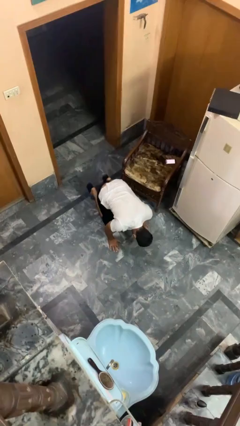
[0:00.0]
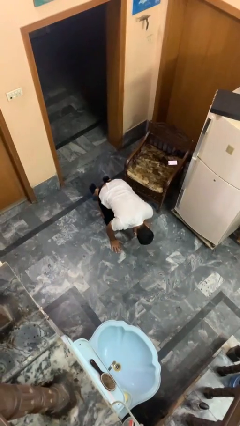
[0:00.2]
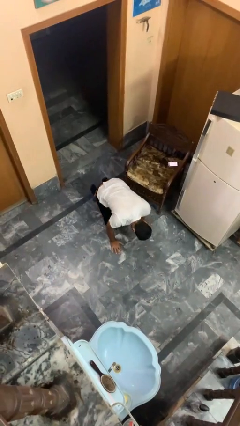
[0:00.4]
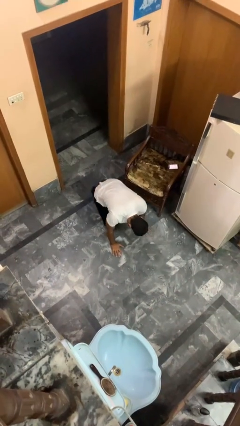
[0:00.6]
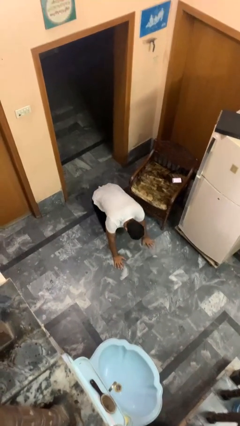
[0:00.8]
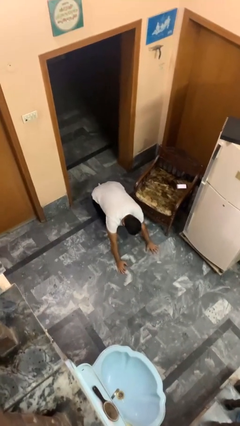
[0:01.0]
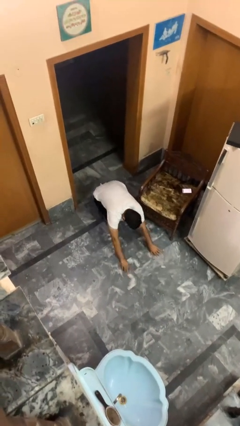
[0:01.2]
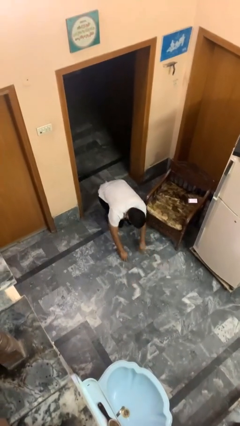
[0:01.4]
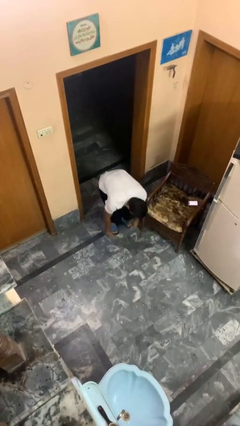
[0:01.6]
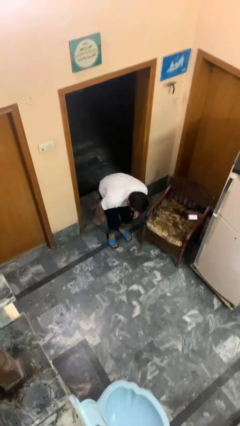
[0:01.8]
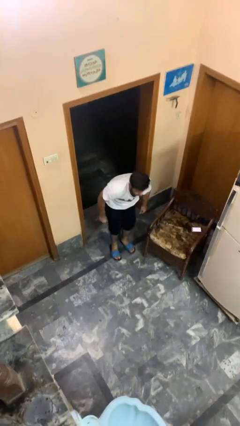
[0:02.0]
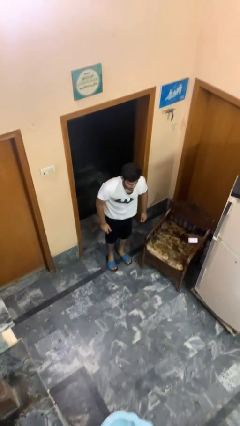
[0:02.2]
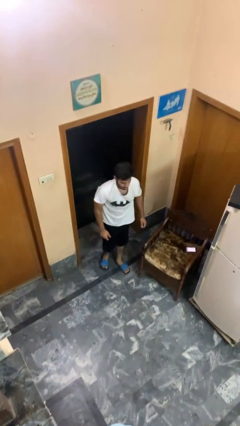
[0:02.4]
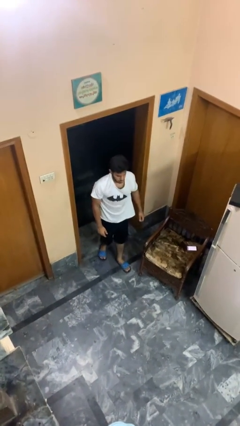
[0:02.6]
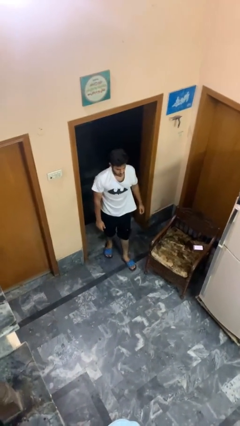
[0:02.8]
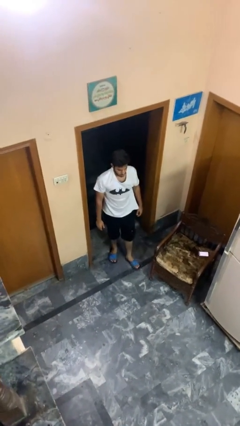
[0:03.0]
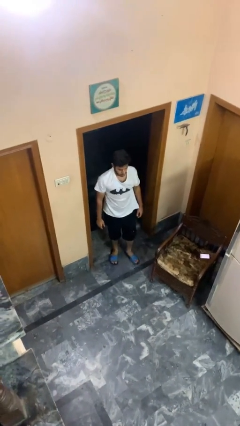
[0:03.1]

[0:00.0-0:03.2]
person stands up from floor

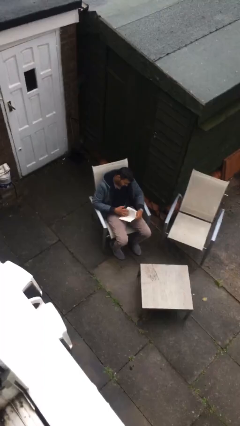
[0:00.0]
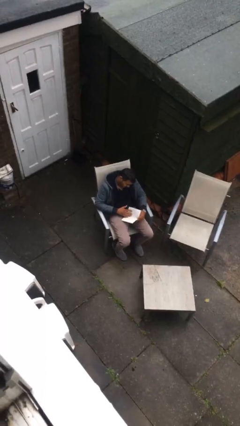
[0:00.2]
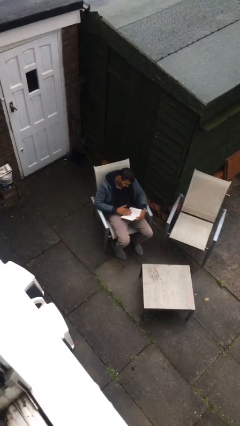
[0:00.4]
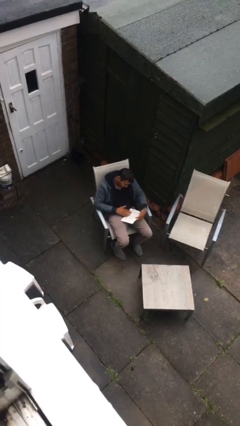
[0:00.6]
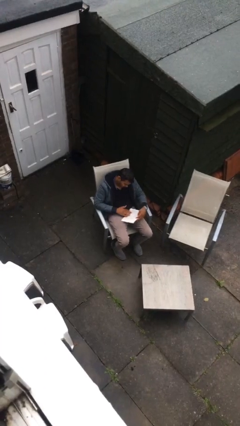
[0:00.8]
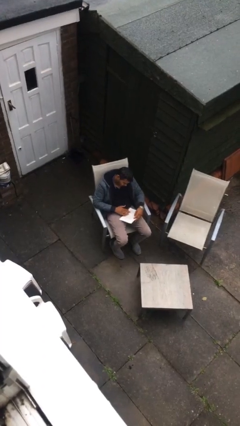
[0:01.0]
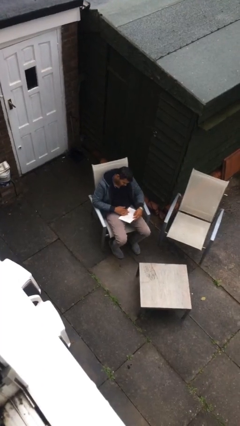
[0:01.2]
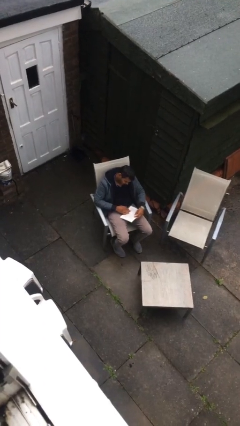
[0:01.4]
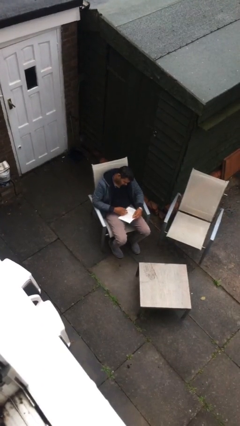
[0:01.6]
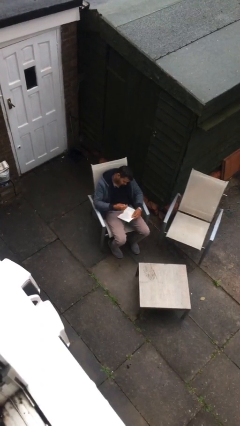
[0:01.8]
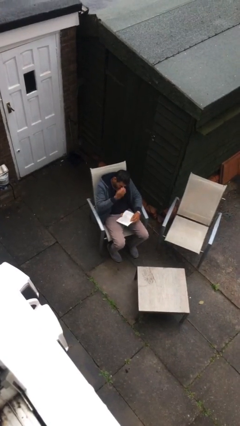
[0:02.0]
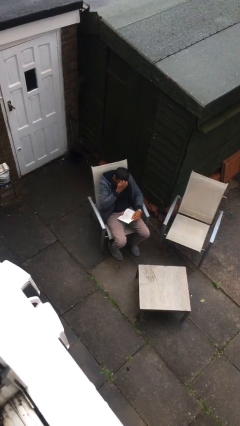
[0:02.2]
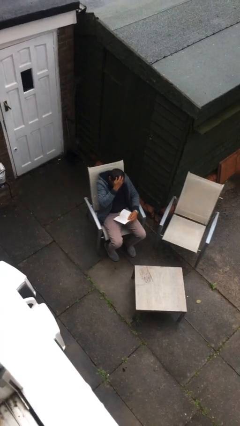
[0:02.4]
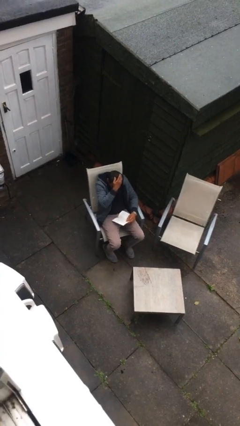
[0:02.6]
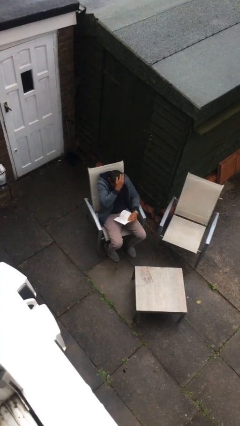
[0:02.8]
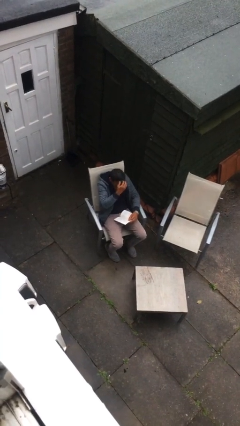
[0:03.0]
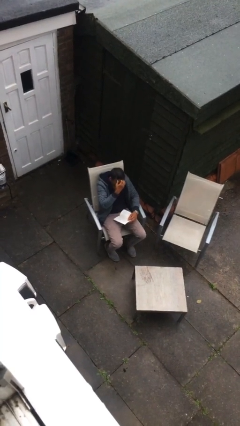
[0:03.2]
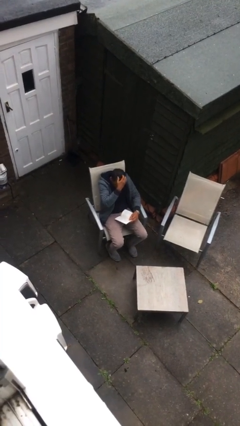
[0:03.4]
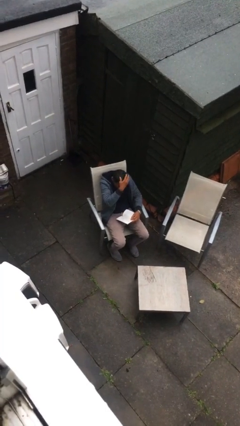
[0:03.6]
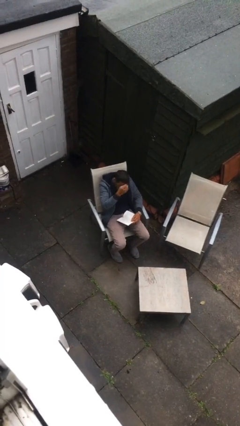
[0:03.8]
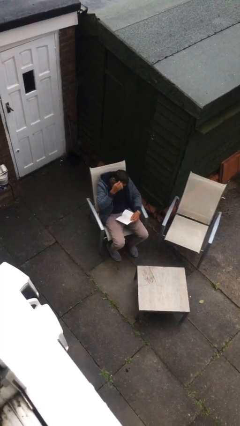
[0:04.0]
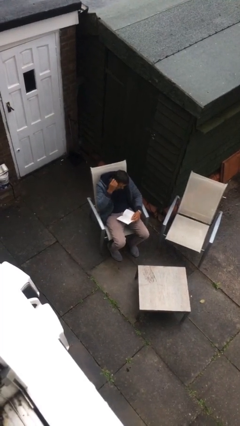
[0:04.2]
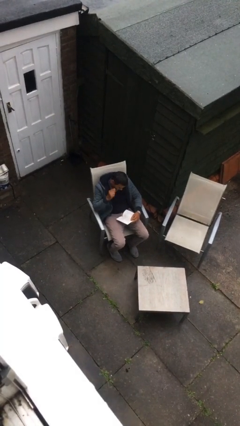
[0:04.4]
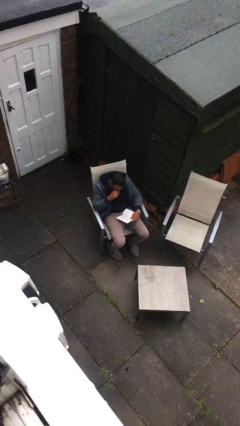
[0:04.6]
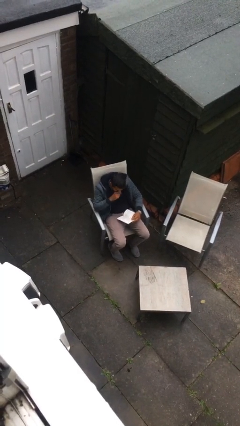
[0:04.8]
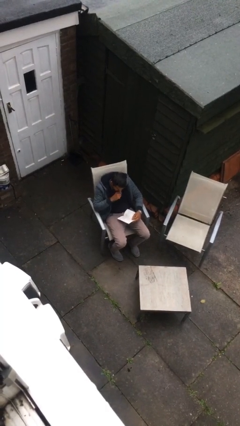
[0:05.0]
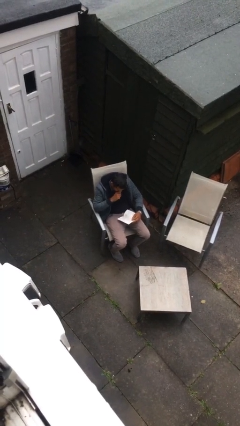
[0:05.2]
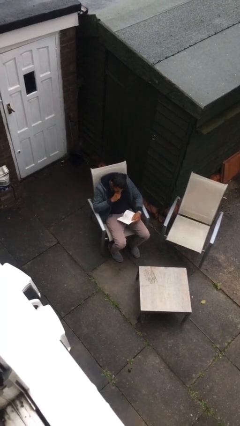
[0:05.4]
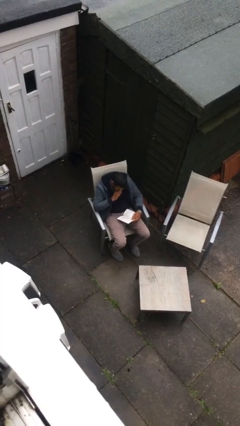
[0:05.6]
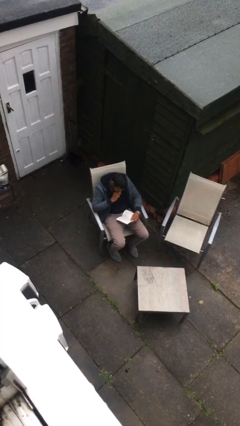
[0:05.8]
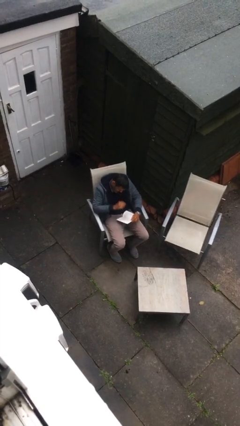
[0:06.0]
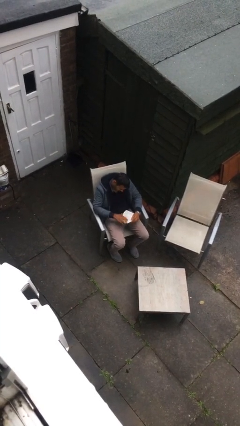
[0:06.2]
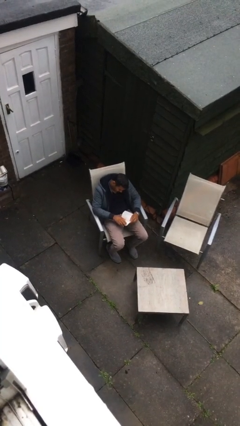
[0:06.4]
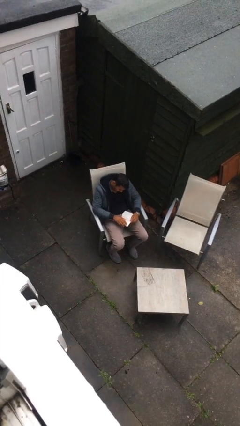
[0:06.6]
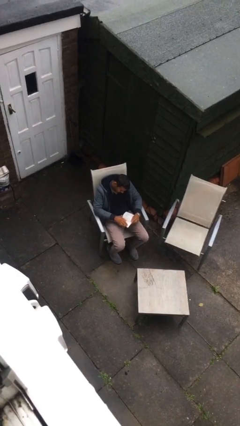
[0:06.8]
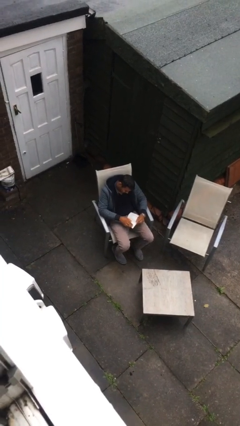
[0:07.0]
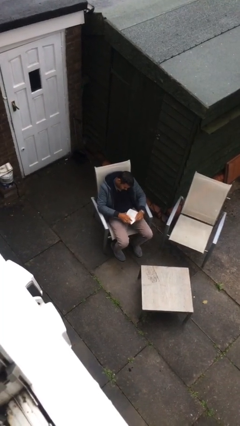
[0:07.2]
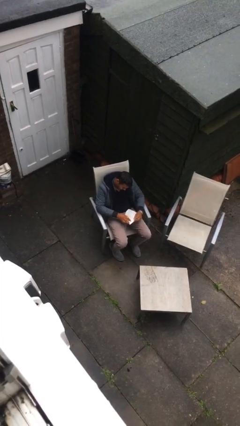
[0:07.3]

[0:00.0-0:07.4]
person reads document

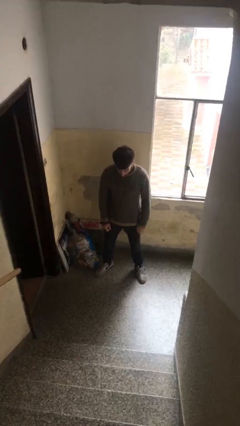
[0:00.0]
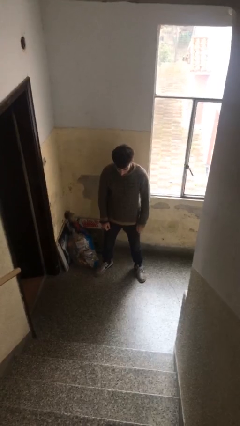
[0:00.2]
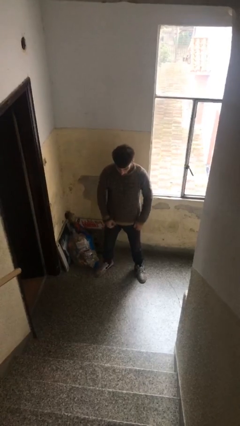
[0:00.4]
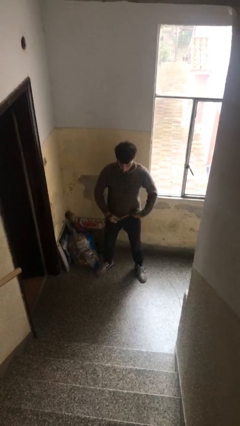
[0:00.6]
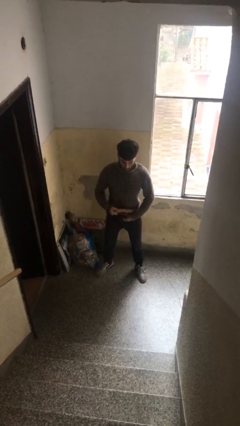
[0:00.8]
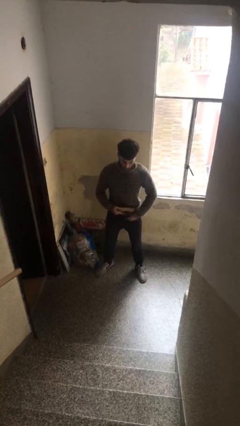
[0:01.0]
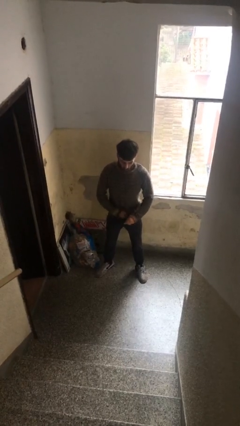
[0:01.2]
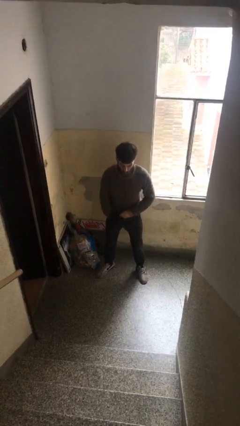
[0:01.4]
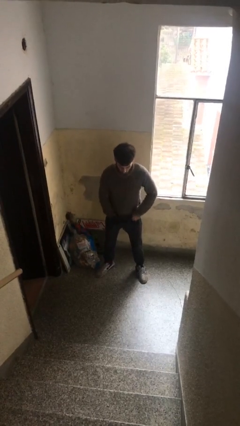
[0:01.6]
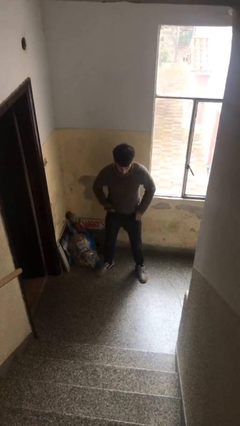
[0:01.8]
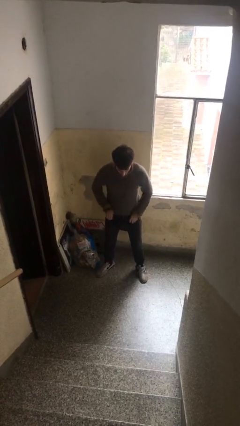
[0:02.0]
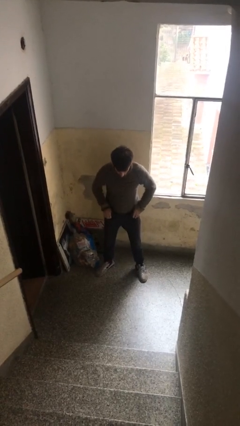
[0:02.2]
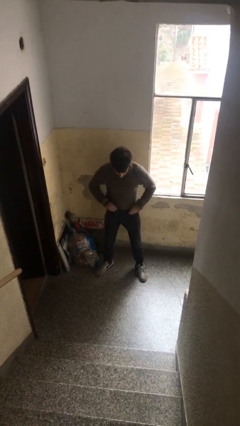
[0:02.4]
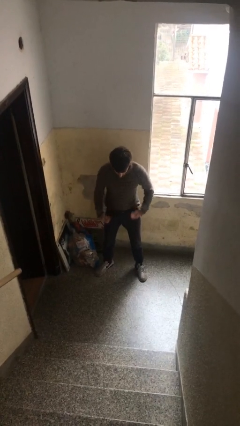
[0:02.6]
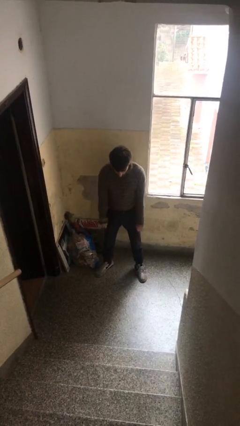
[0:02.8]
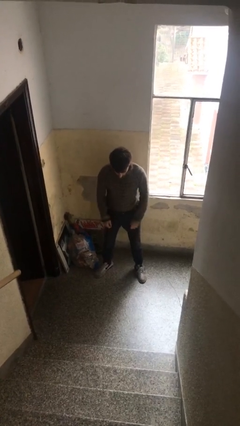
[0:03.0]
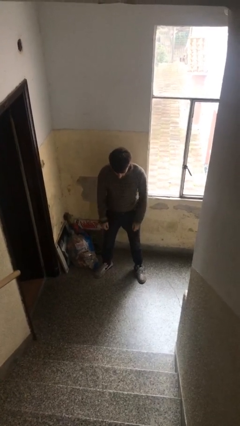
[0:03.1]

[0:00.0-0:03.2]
person tucks in shirt

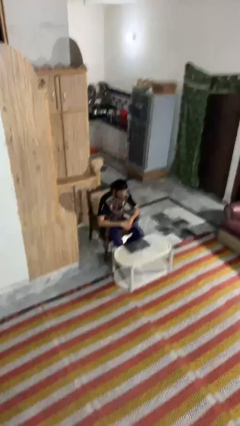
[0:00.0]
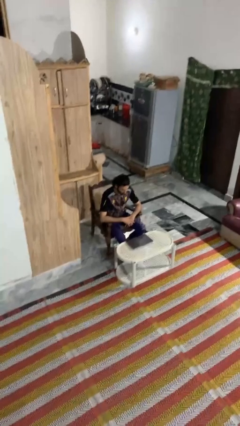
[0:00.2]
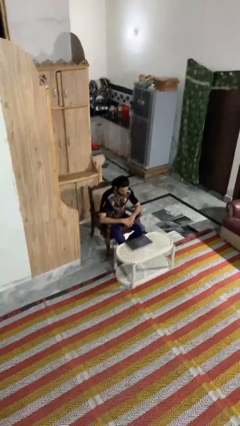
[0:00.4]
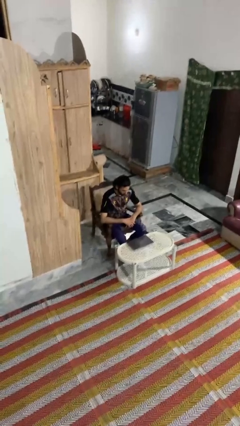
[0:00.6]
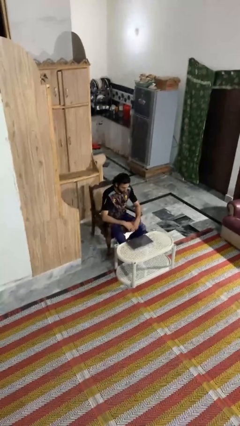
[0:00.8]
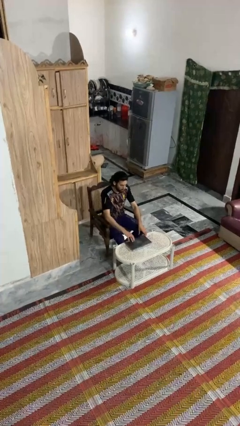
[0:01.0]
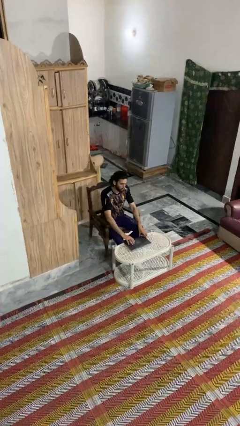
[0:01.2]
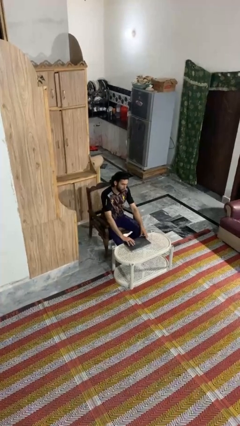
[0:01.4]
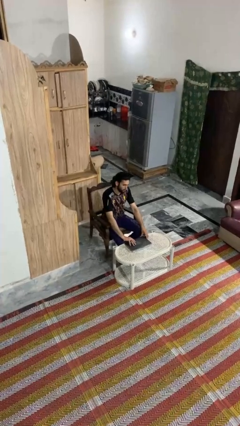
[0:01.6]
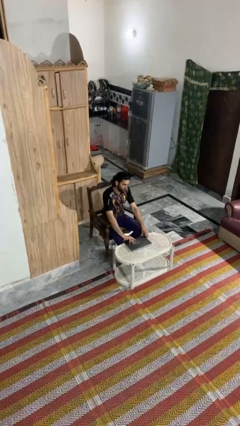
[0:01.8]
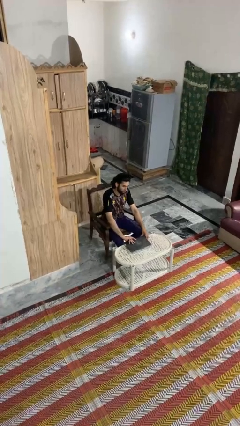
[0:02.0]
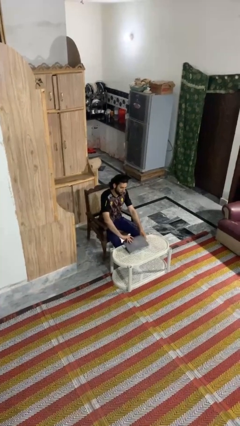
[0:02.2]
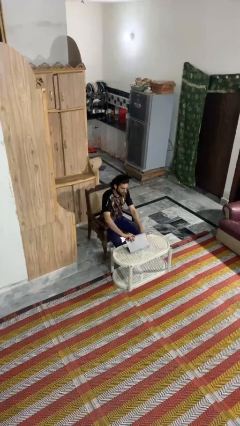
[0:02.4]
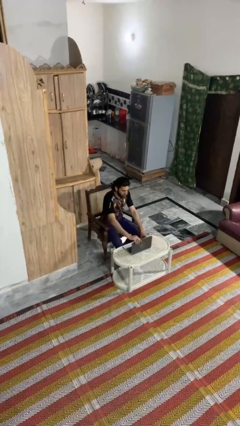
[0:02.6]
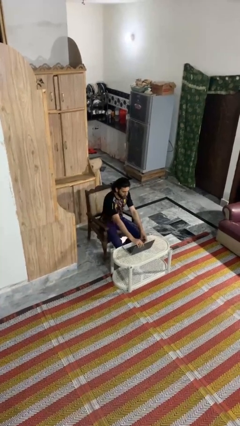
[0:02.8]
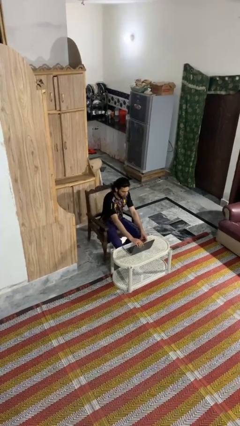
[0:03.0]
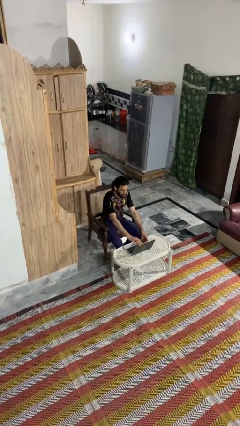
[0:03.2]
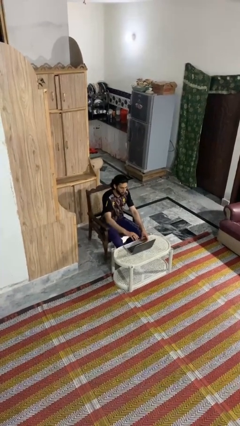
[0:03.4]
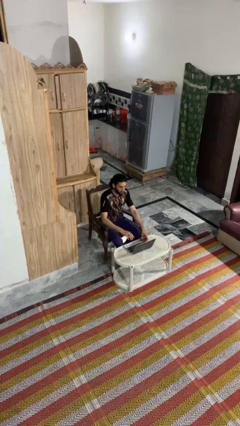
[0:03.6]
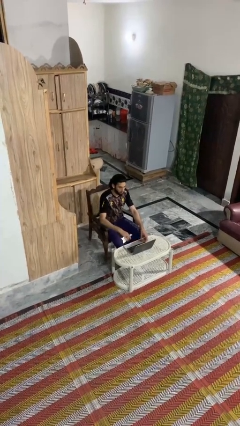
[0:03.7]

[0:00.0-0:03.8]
person opens laptop
